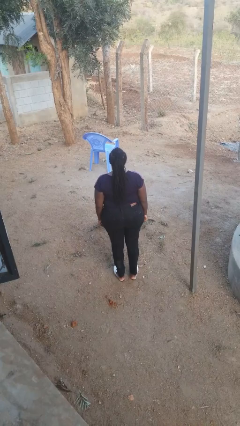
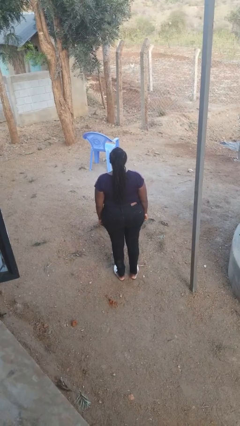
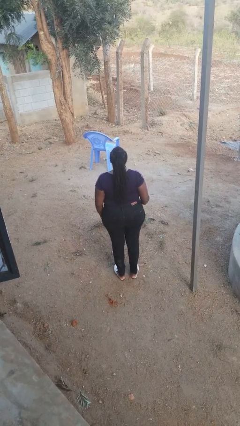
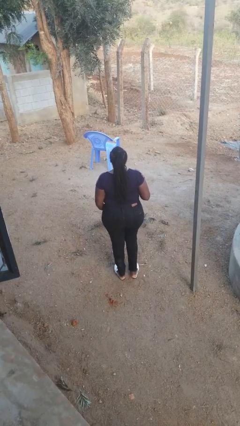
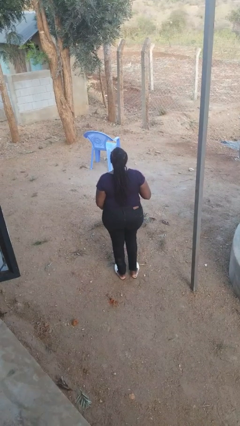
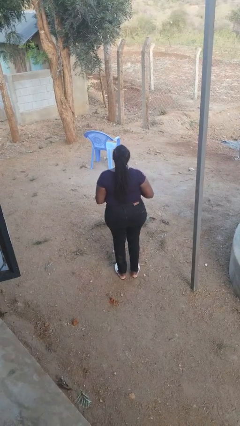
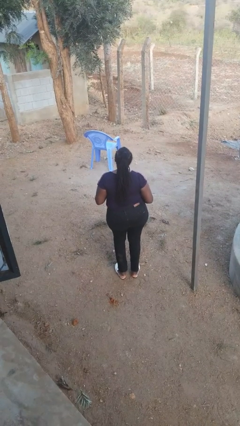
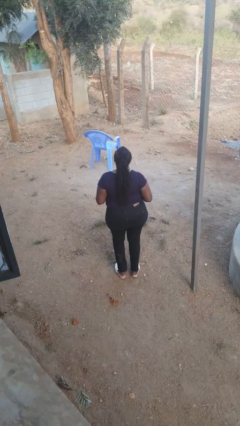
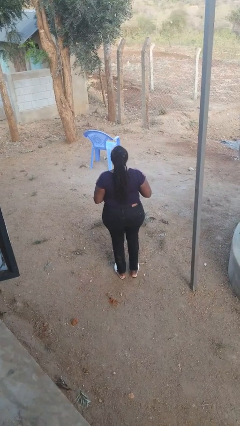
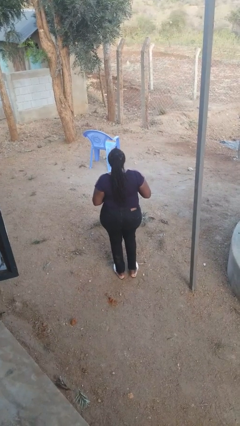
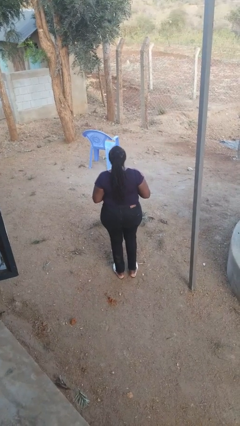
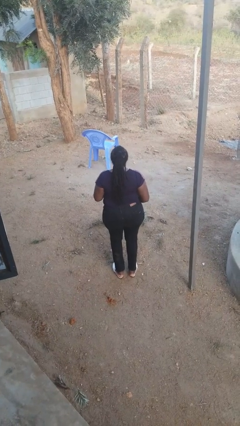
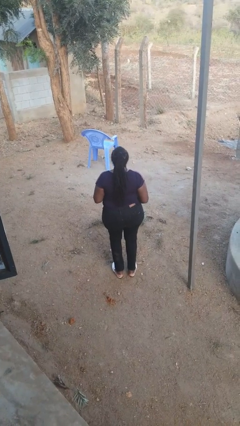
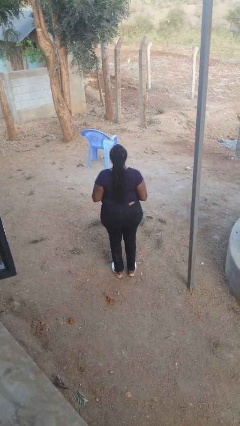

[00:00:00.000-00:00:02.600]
person wiggles hips

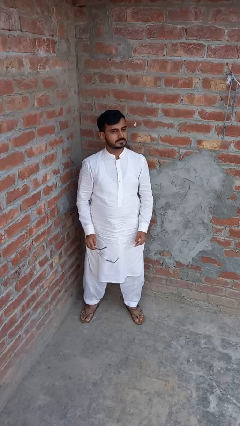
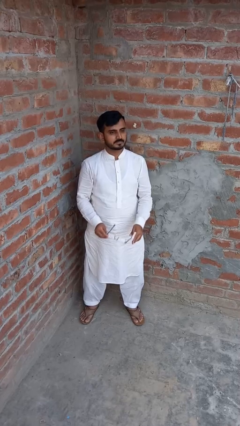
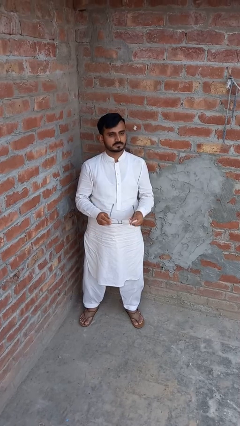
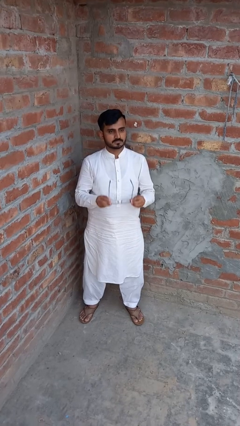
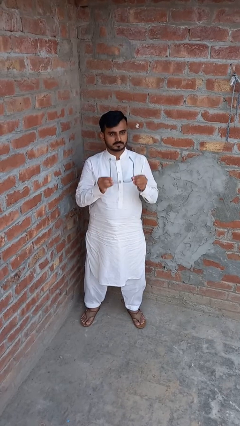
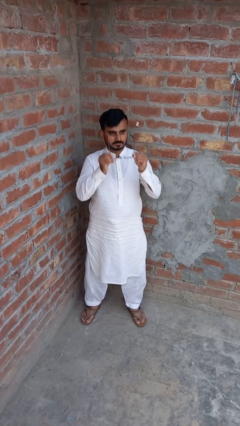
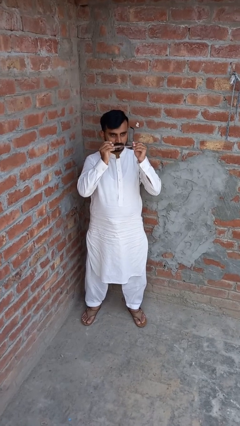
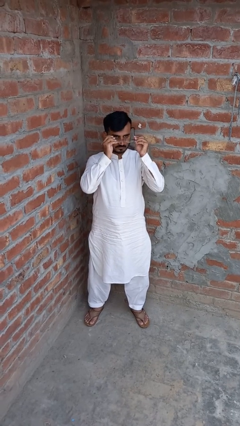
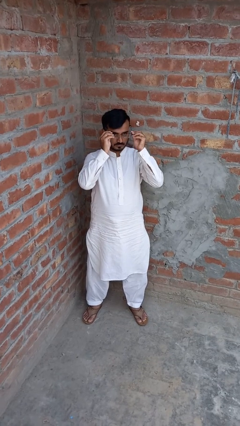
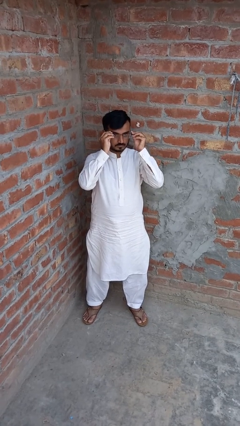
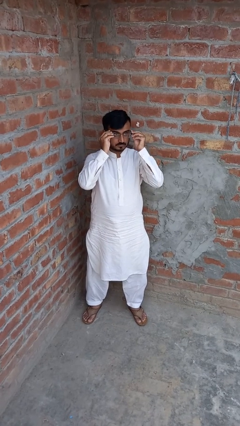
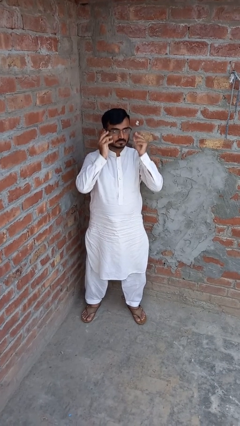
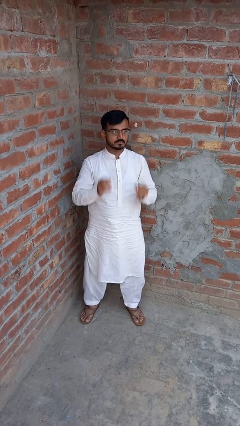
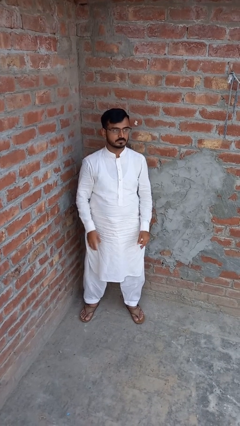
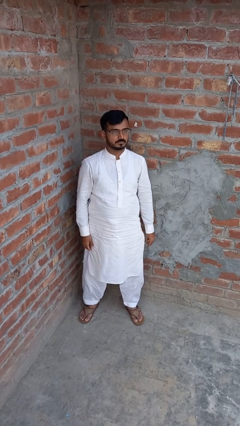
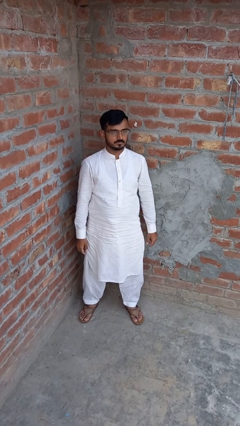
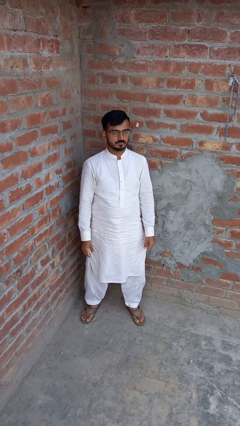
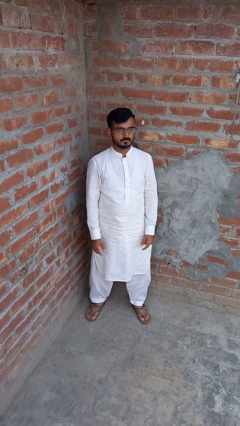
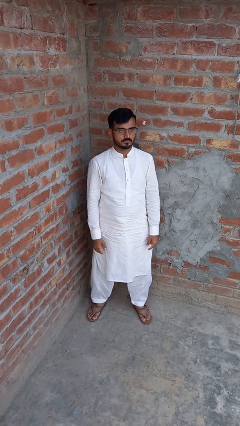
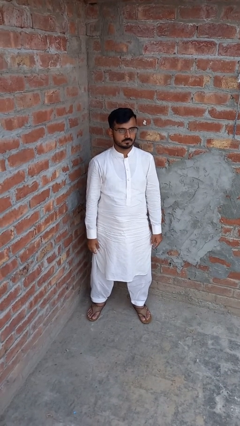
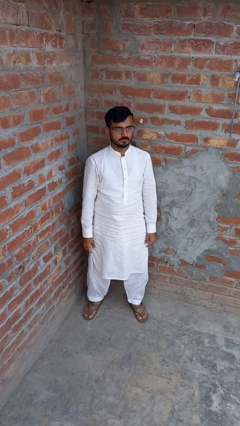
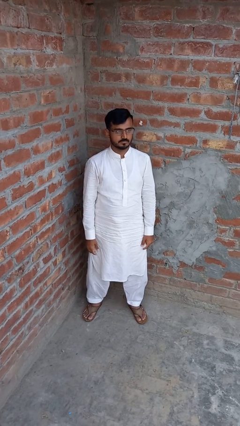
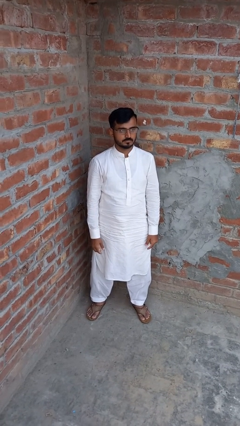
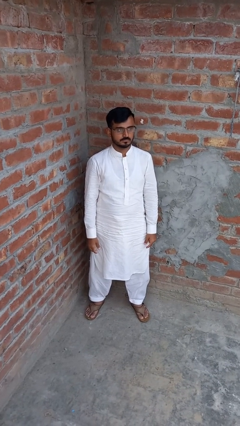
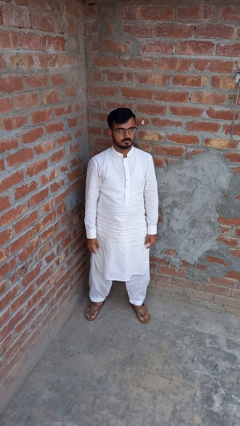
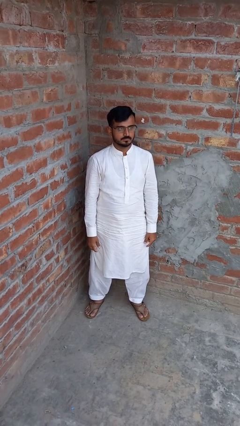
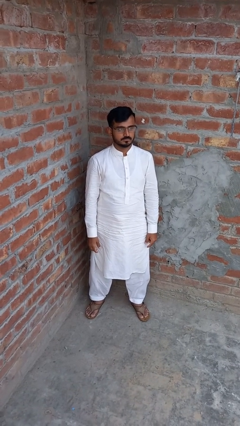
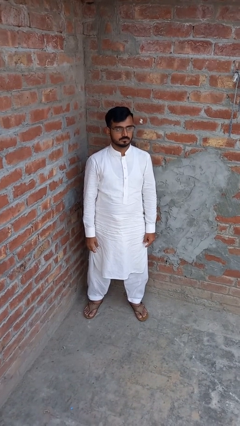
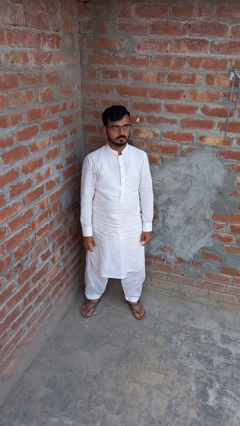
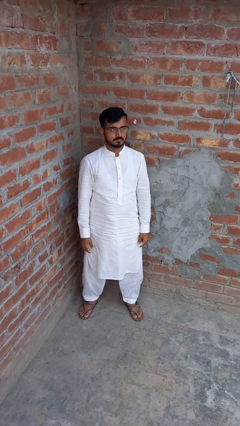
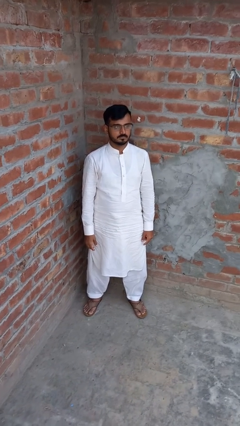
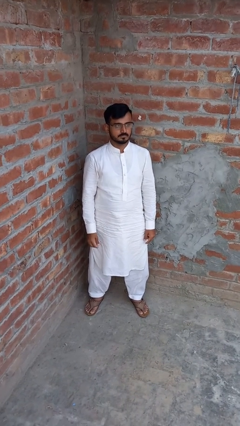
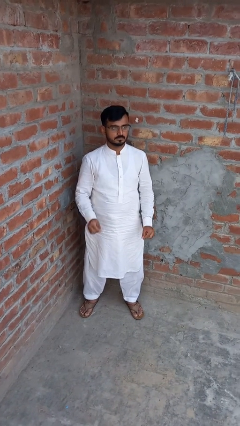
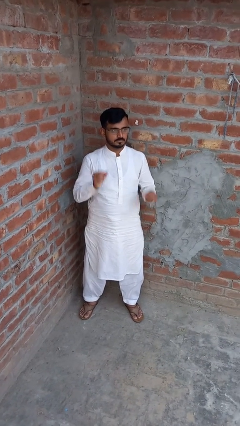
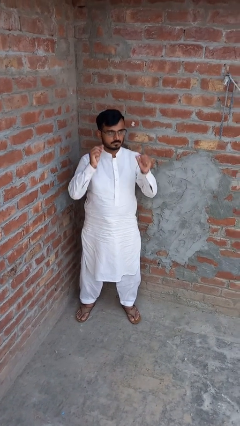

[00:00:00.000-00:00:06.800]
person puts on glasses

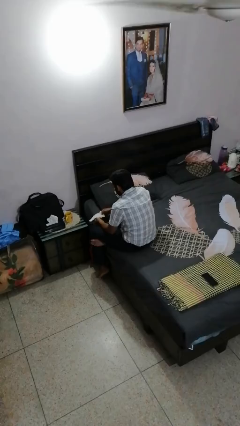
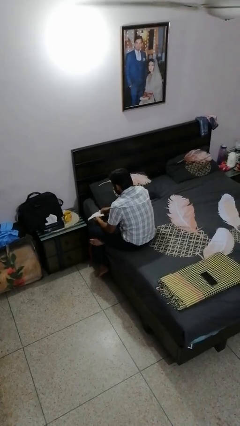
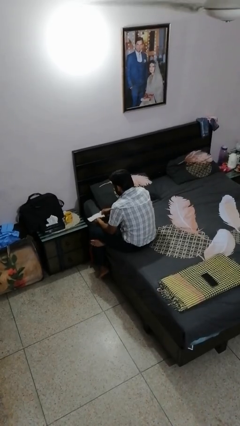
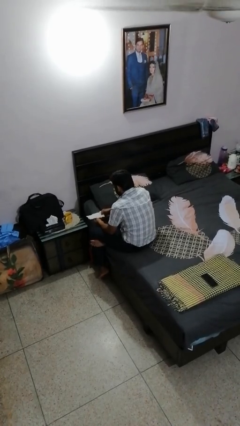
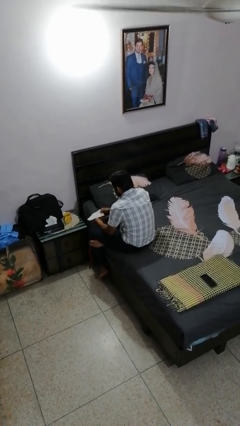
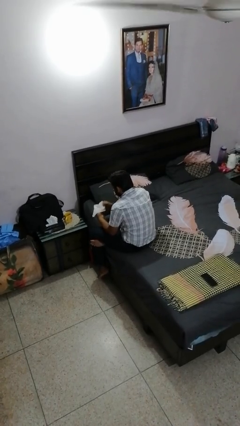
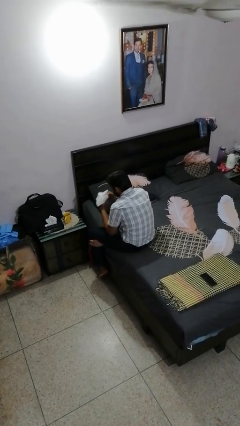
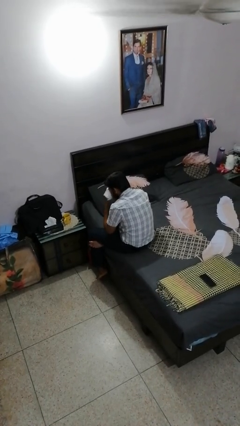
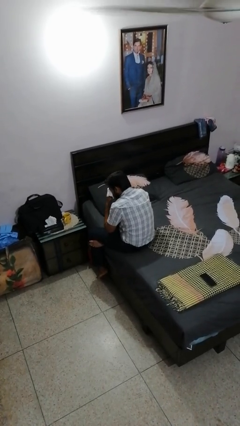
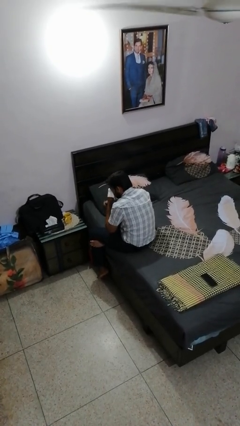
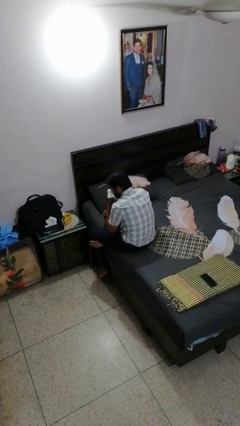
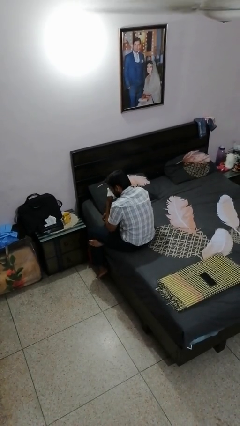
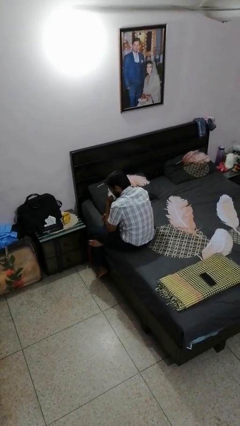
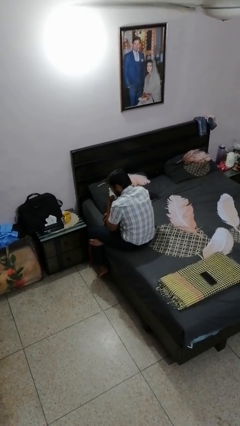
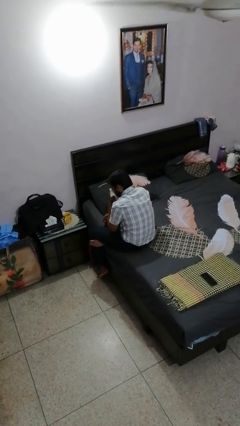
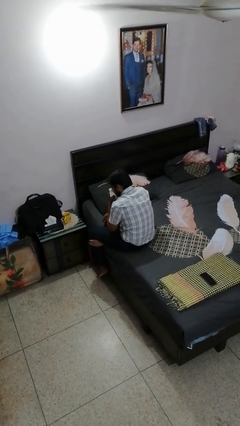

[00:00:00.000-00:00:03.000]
person blows nose

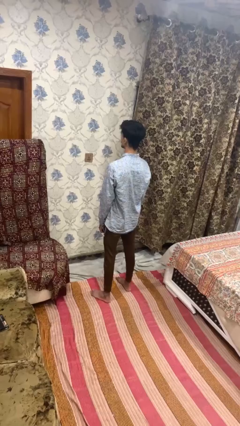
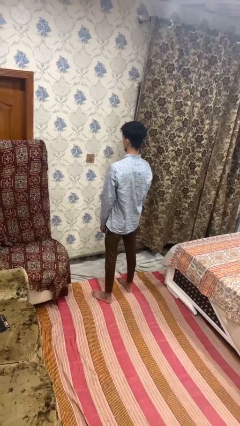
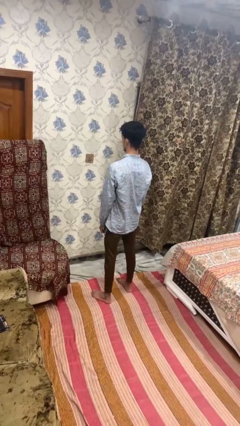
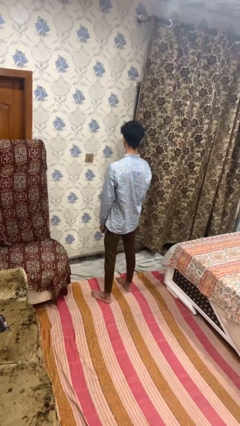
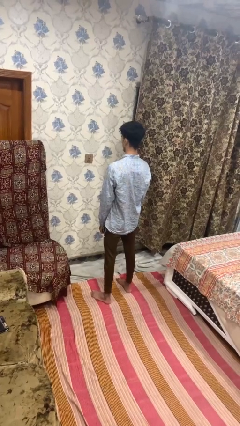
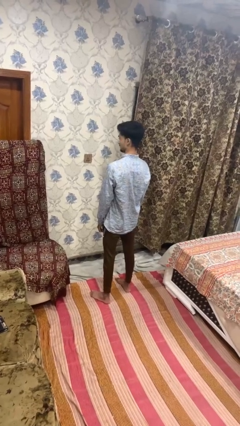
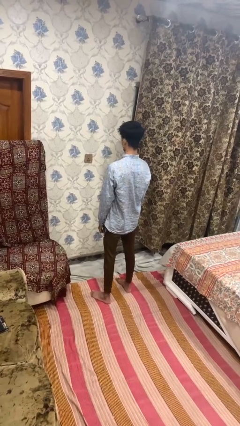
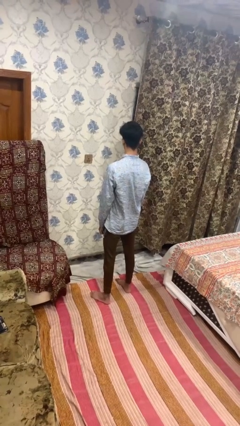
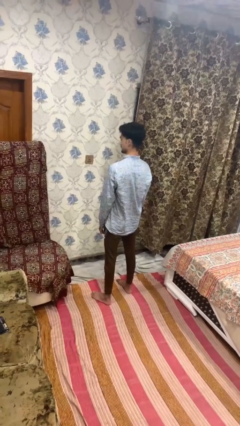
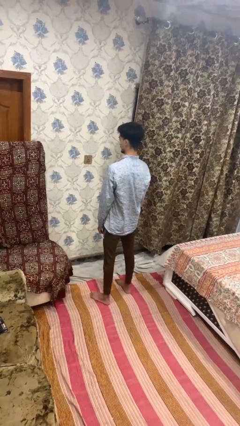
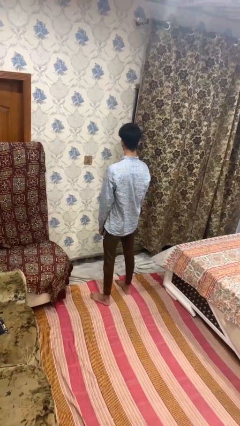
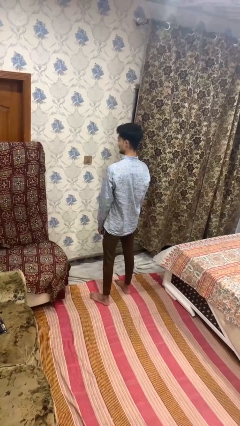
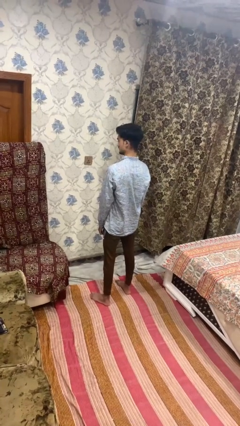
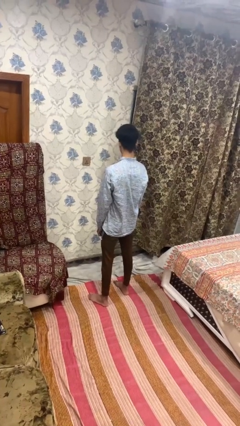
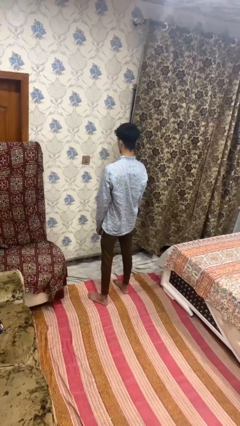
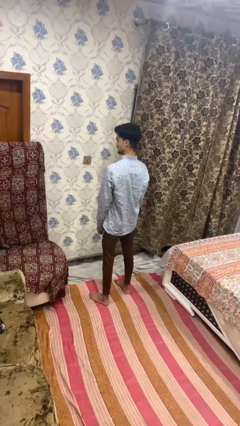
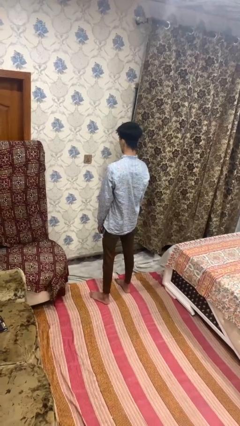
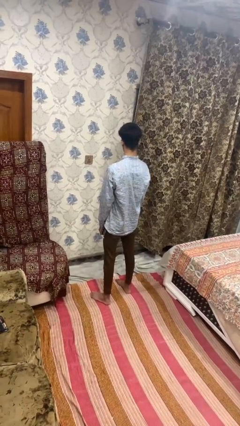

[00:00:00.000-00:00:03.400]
person shakes head

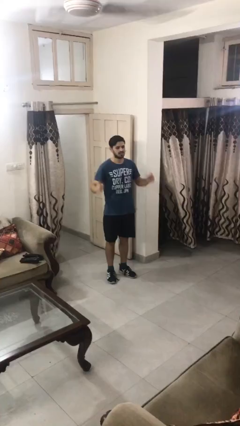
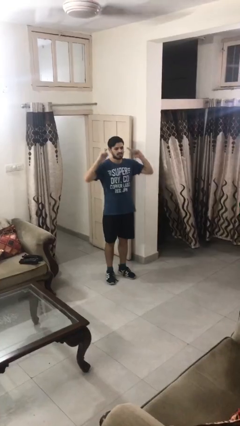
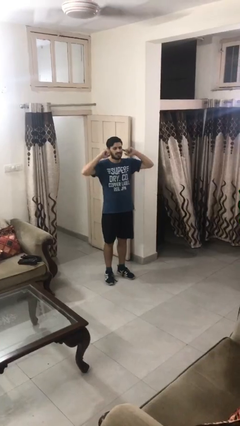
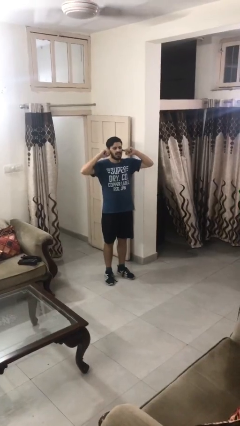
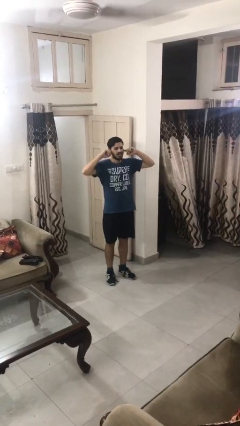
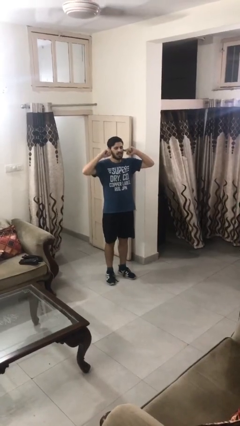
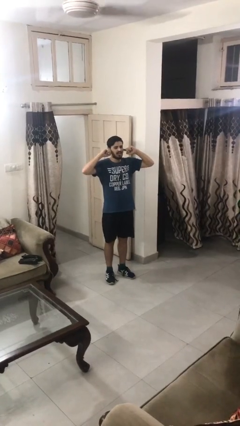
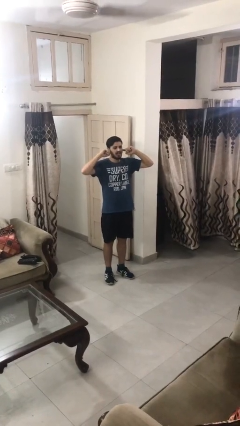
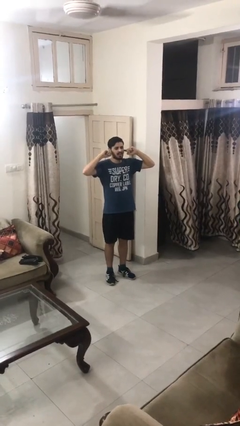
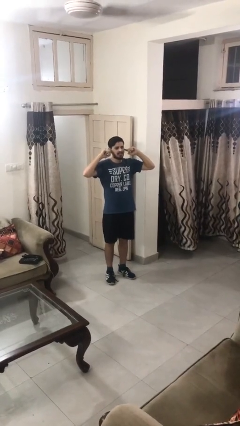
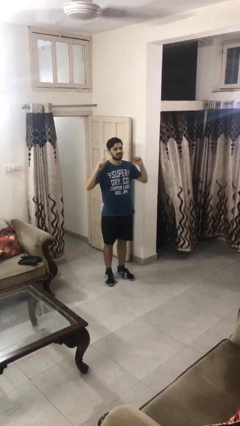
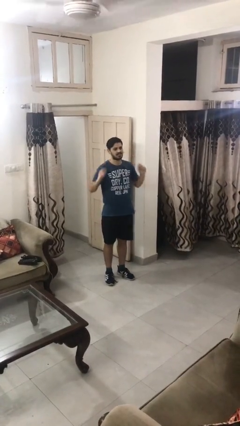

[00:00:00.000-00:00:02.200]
person puts fingers in ear
